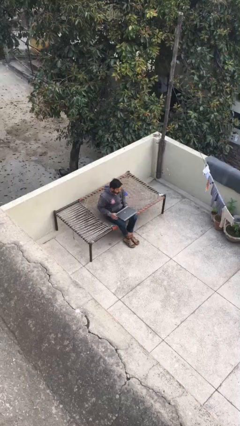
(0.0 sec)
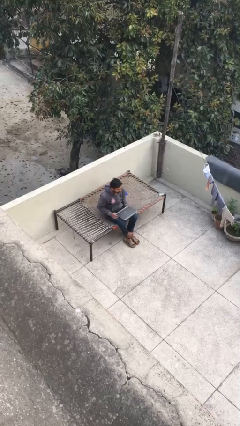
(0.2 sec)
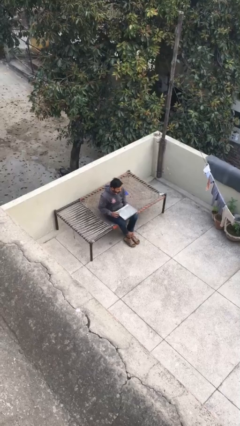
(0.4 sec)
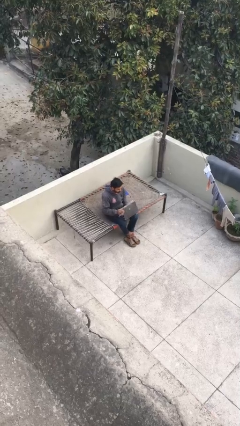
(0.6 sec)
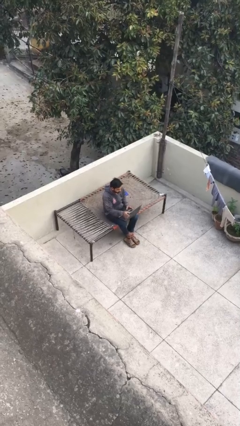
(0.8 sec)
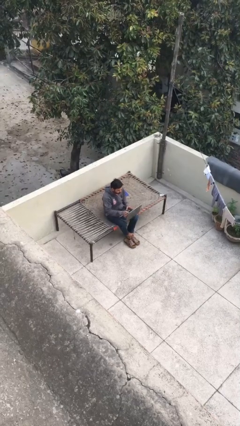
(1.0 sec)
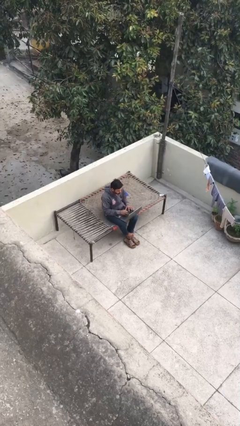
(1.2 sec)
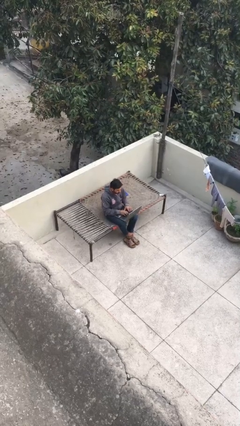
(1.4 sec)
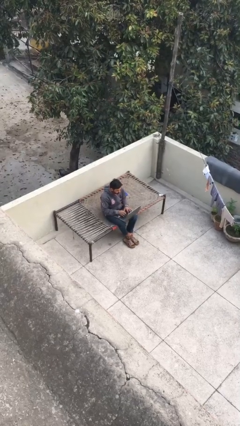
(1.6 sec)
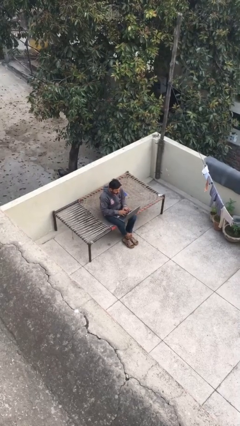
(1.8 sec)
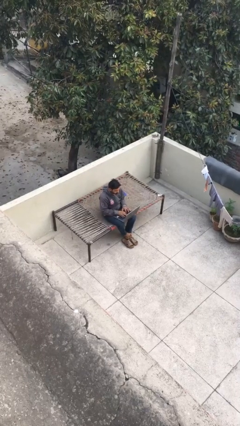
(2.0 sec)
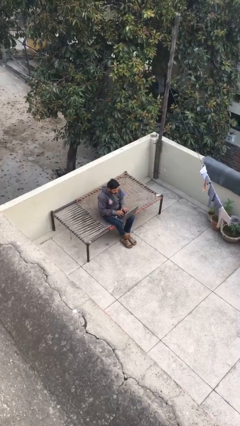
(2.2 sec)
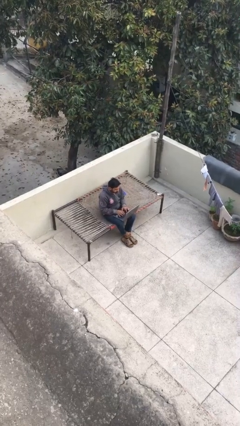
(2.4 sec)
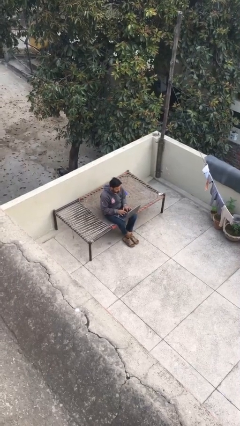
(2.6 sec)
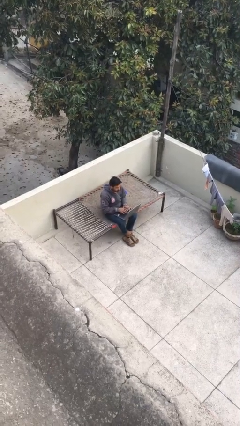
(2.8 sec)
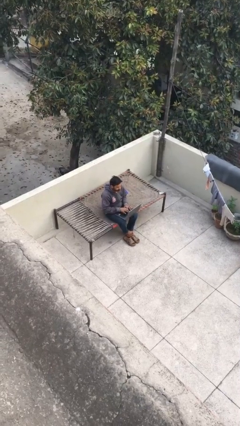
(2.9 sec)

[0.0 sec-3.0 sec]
person interacts with laptop

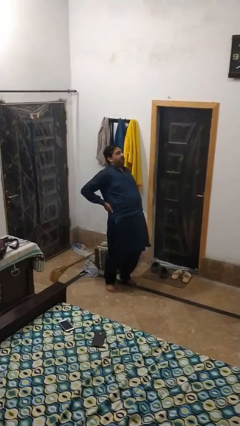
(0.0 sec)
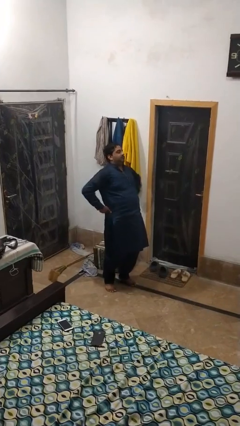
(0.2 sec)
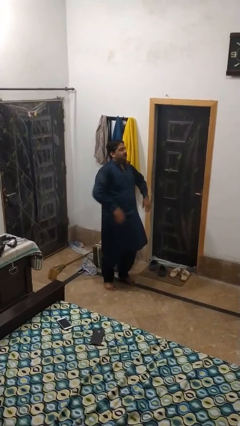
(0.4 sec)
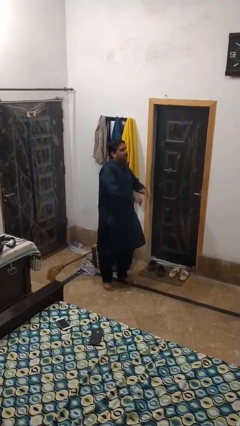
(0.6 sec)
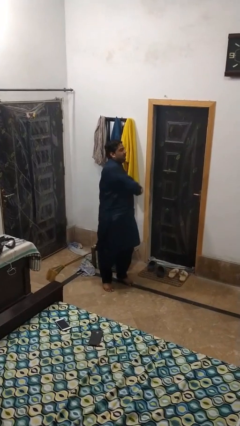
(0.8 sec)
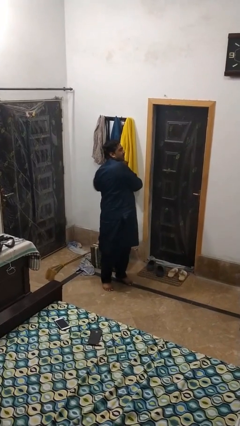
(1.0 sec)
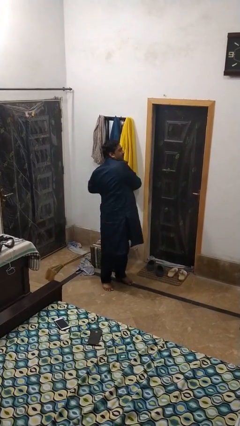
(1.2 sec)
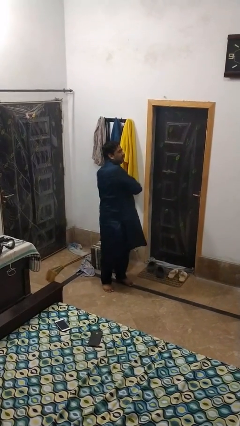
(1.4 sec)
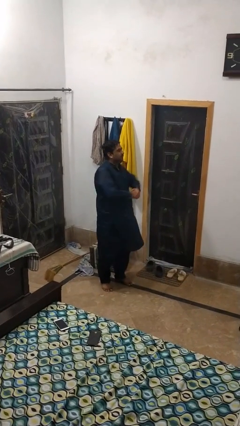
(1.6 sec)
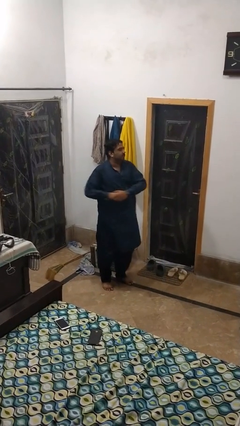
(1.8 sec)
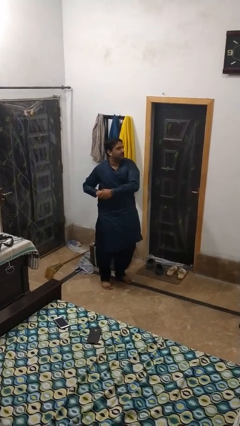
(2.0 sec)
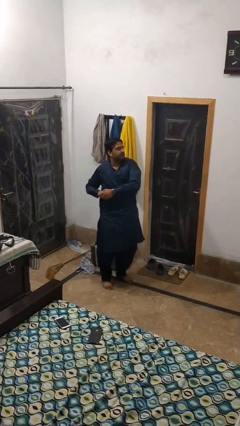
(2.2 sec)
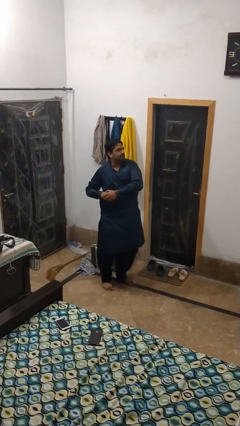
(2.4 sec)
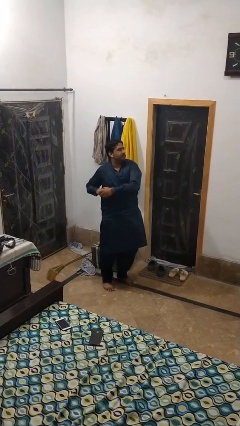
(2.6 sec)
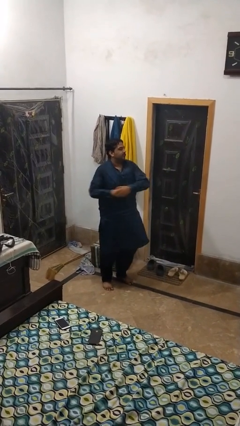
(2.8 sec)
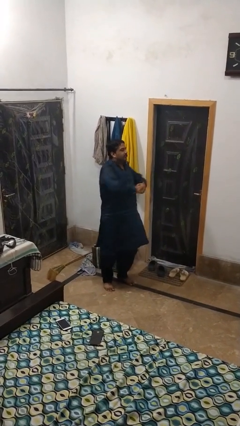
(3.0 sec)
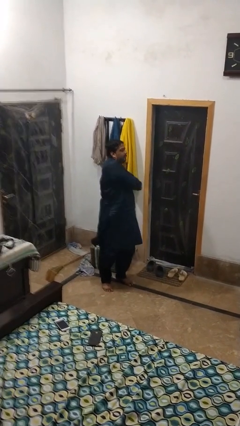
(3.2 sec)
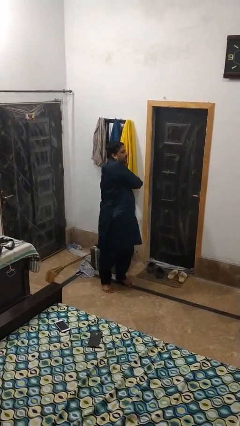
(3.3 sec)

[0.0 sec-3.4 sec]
person stretches arms to side

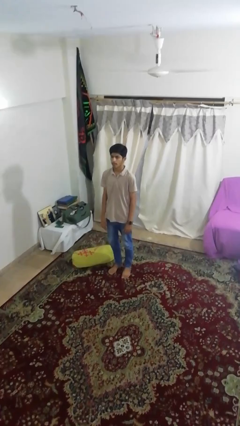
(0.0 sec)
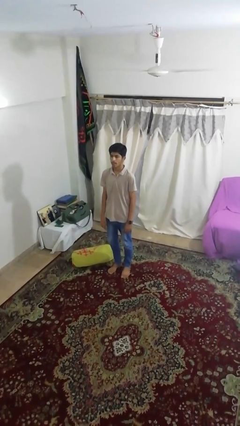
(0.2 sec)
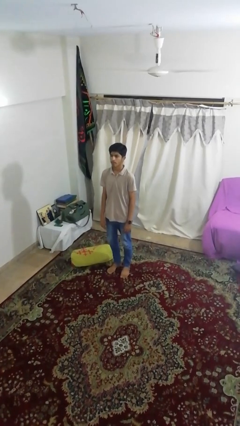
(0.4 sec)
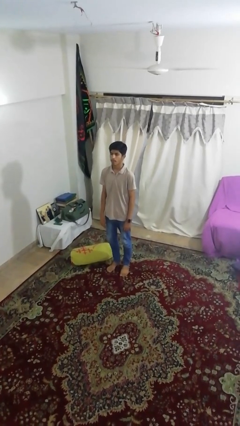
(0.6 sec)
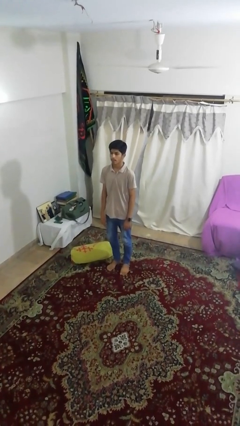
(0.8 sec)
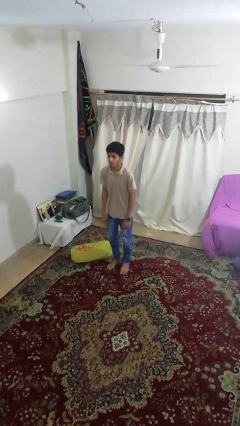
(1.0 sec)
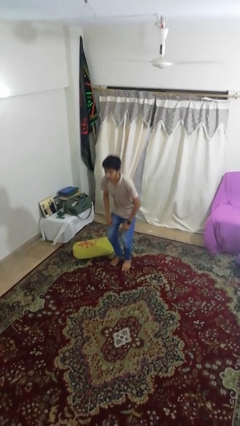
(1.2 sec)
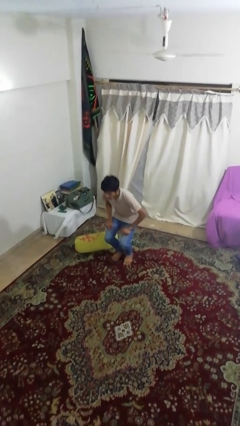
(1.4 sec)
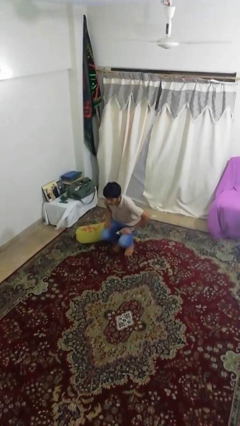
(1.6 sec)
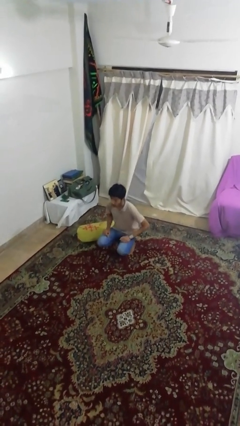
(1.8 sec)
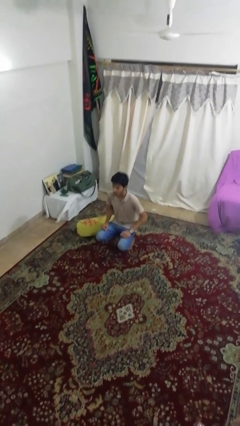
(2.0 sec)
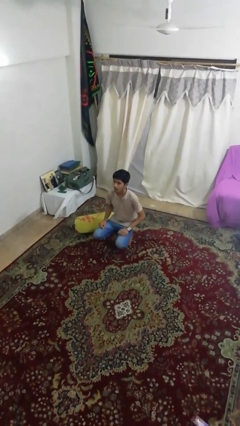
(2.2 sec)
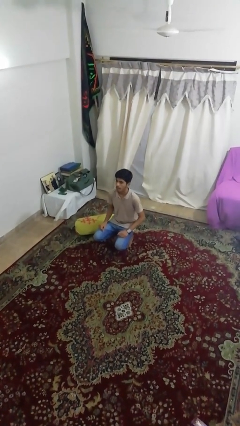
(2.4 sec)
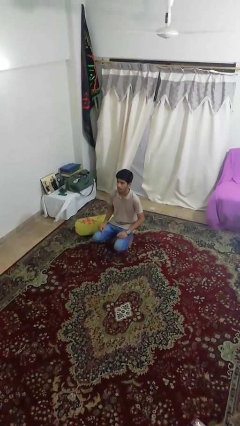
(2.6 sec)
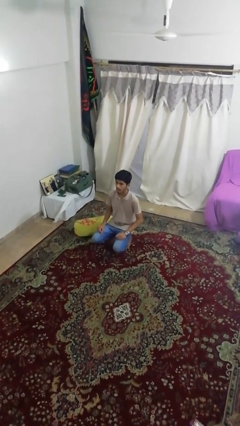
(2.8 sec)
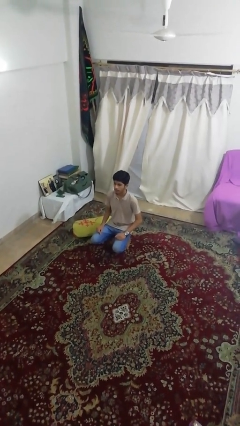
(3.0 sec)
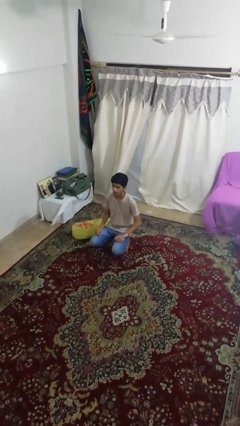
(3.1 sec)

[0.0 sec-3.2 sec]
person squats

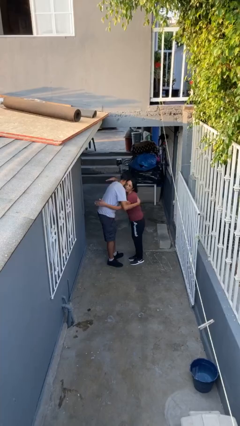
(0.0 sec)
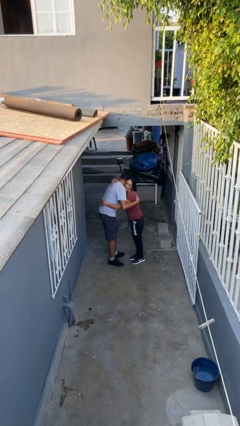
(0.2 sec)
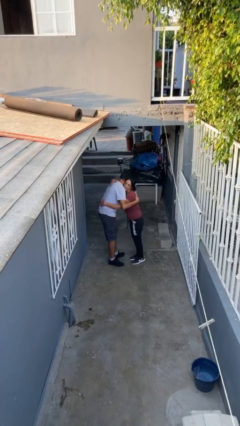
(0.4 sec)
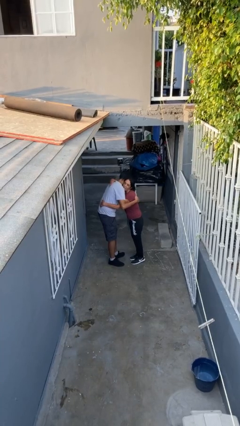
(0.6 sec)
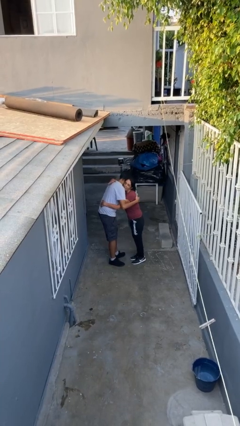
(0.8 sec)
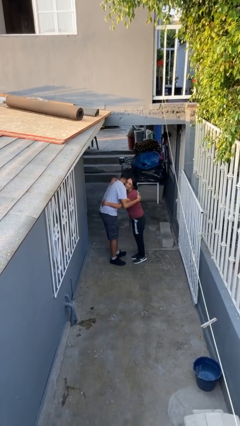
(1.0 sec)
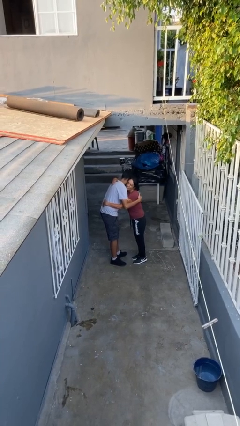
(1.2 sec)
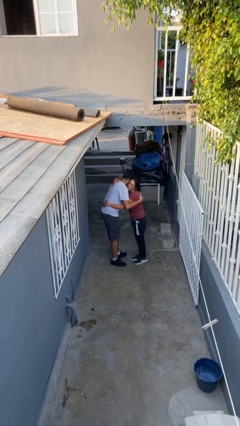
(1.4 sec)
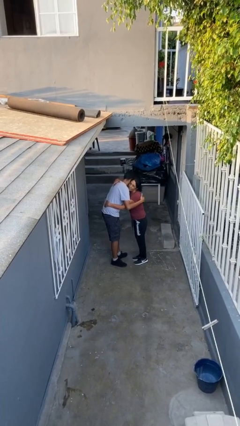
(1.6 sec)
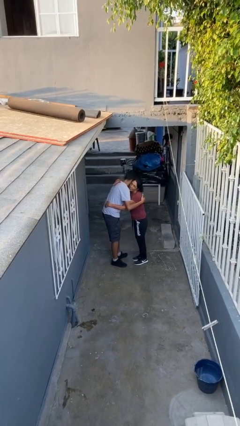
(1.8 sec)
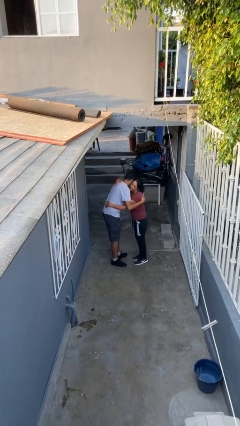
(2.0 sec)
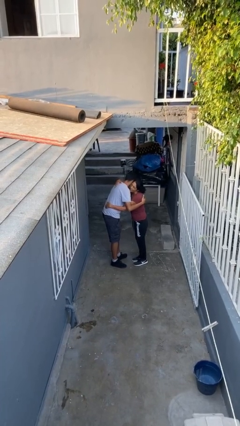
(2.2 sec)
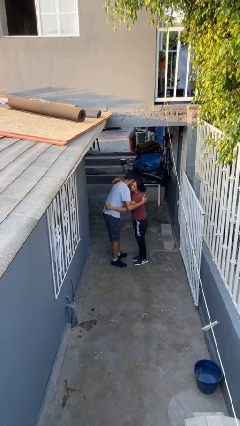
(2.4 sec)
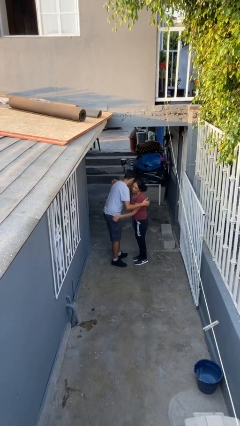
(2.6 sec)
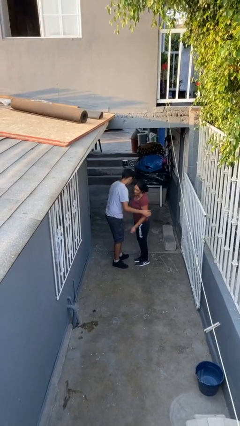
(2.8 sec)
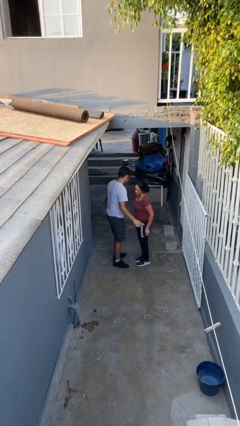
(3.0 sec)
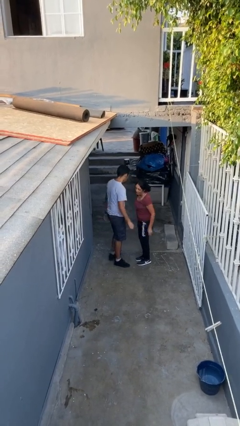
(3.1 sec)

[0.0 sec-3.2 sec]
person embraces person

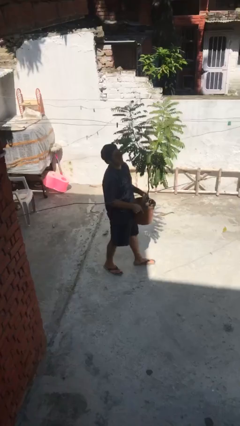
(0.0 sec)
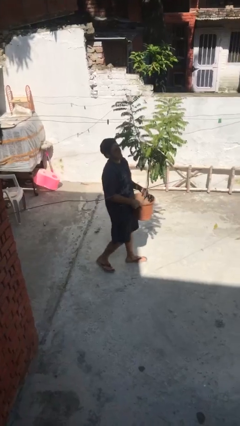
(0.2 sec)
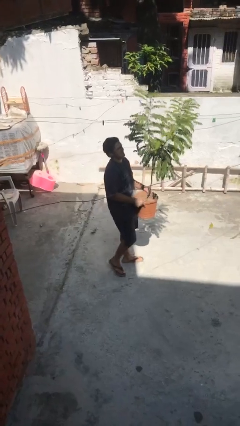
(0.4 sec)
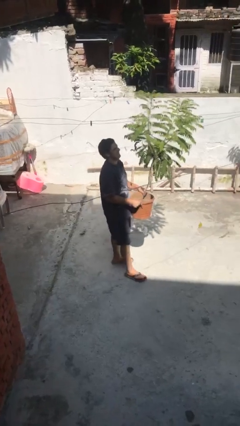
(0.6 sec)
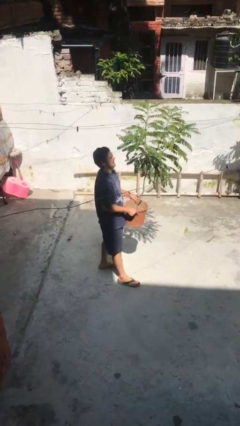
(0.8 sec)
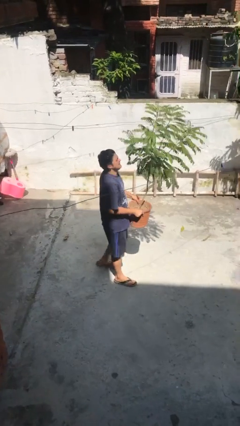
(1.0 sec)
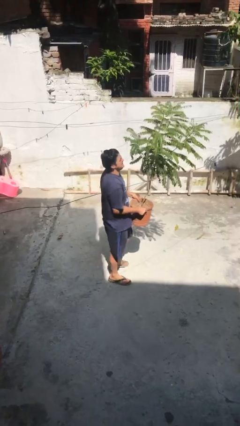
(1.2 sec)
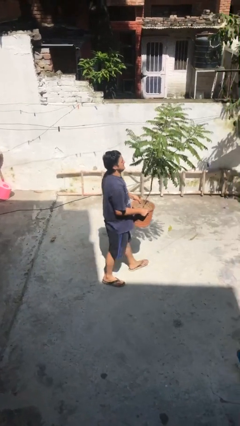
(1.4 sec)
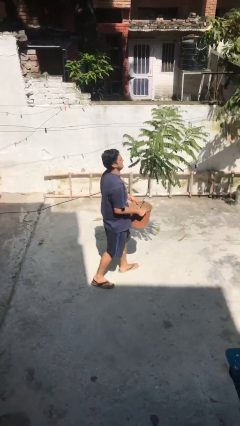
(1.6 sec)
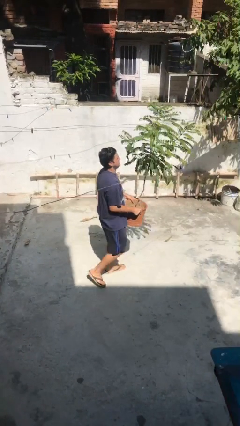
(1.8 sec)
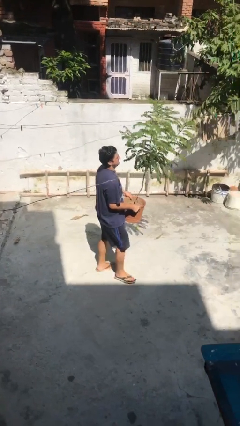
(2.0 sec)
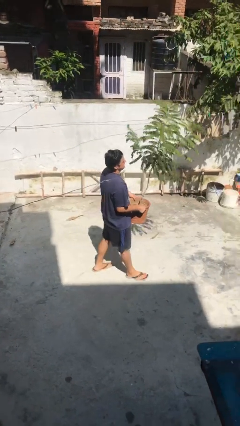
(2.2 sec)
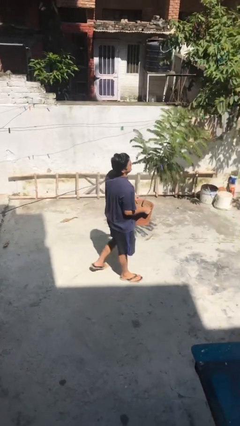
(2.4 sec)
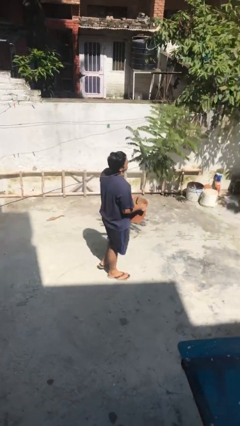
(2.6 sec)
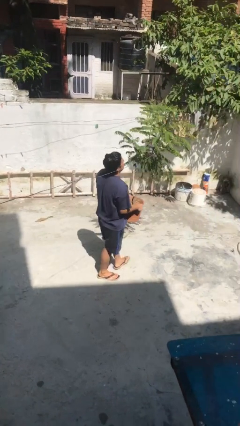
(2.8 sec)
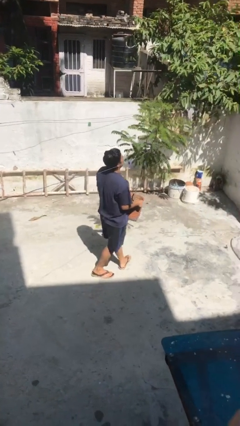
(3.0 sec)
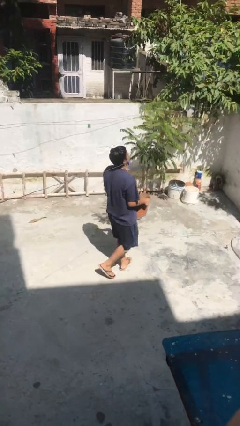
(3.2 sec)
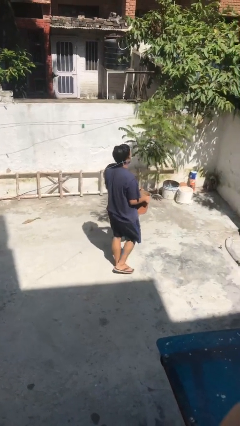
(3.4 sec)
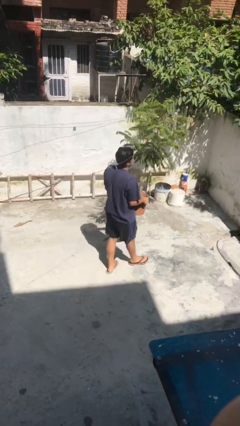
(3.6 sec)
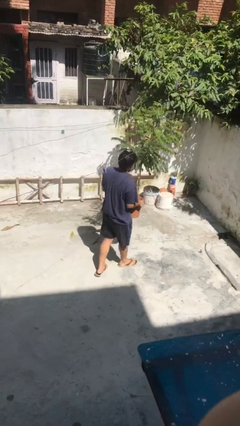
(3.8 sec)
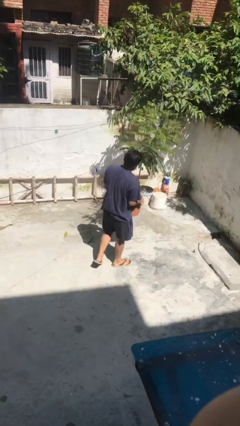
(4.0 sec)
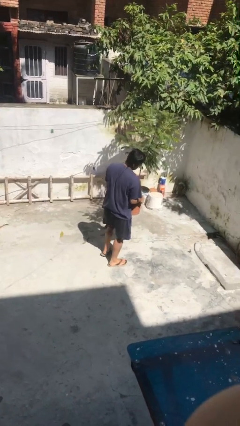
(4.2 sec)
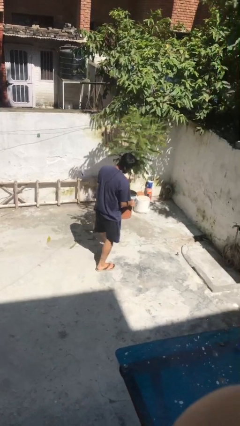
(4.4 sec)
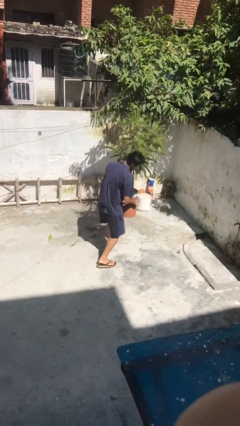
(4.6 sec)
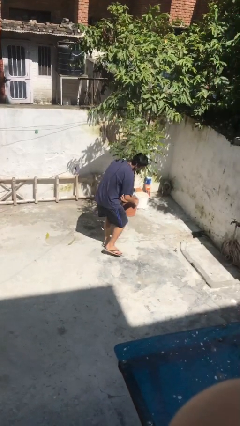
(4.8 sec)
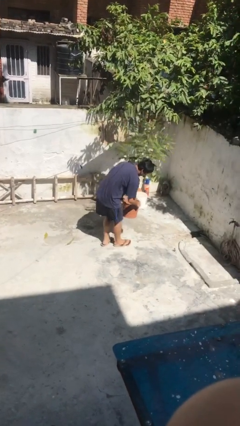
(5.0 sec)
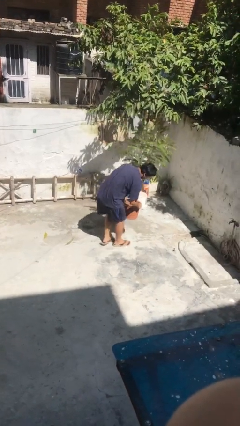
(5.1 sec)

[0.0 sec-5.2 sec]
person carries heavy object
